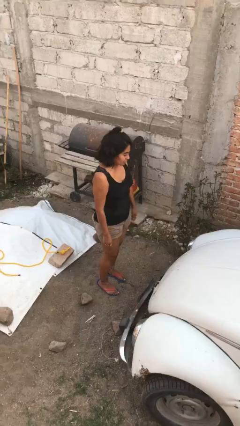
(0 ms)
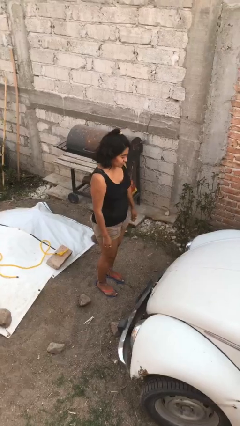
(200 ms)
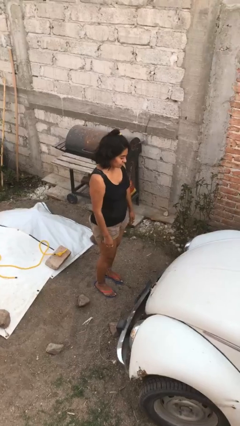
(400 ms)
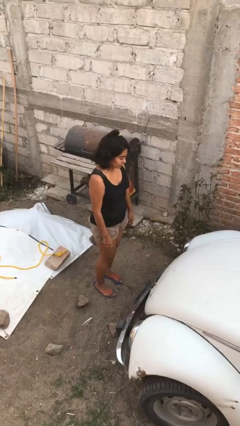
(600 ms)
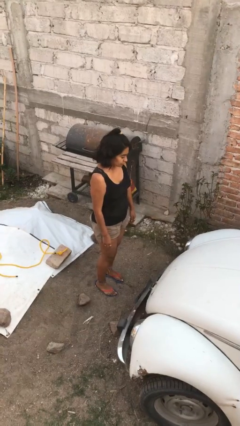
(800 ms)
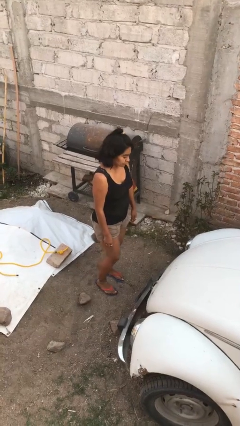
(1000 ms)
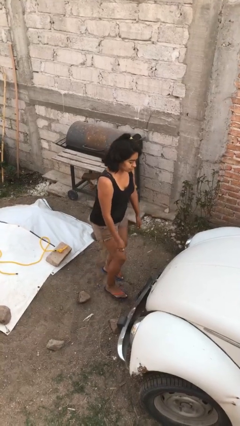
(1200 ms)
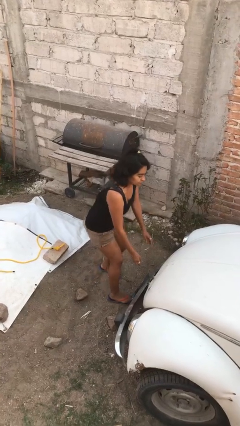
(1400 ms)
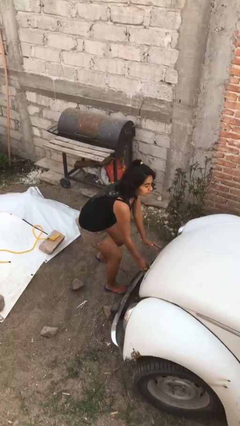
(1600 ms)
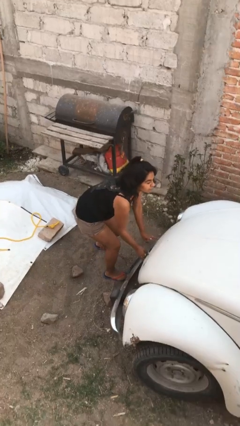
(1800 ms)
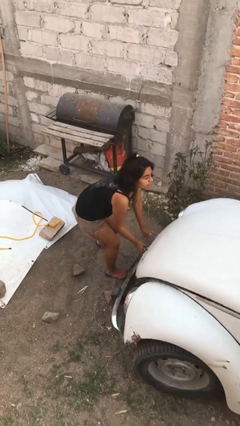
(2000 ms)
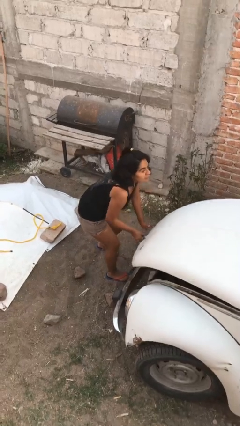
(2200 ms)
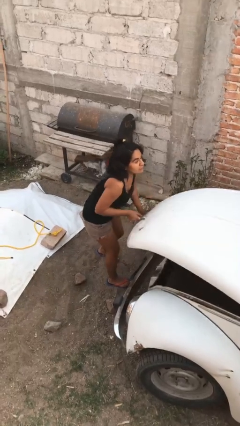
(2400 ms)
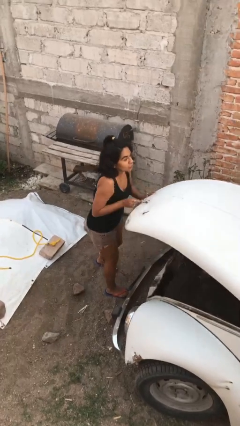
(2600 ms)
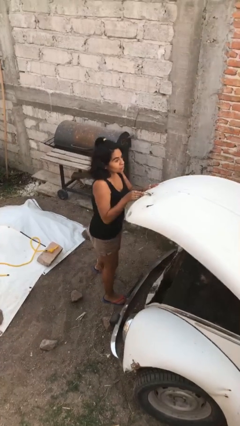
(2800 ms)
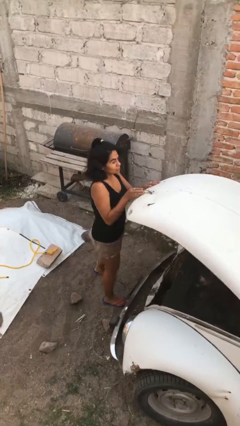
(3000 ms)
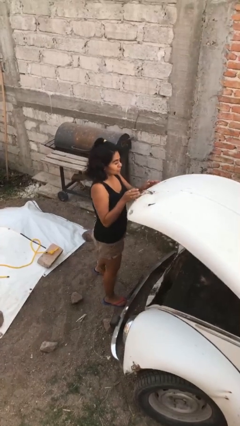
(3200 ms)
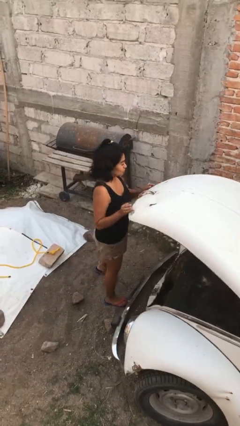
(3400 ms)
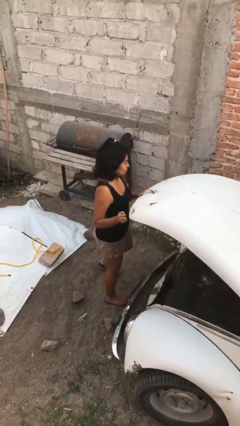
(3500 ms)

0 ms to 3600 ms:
person opens car trunk

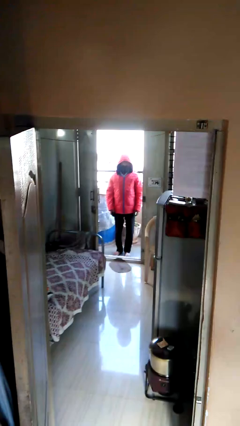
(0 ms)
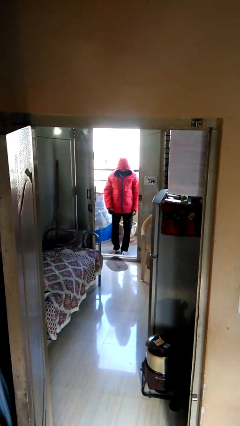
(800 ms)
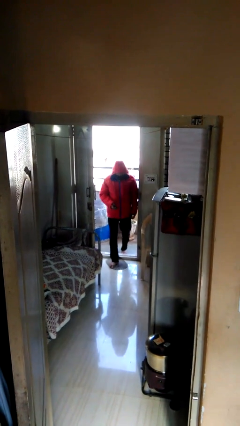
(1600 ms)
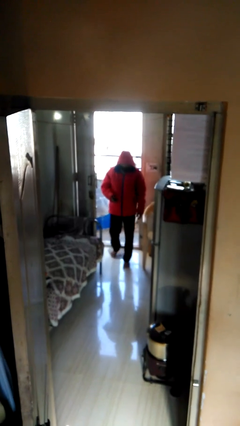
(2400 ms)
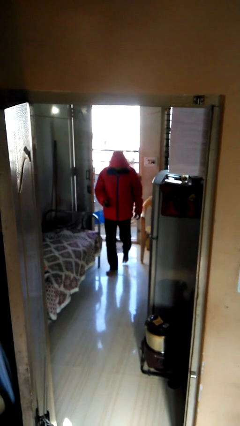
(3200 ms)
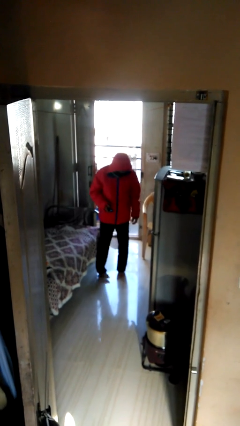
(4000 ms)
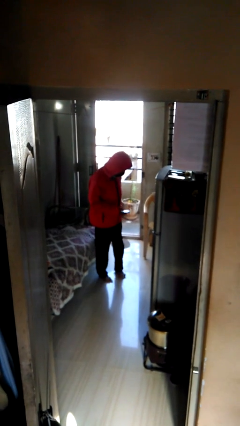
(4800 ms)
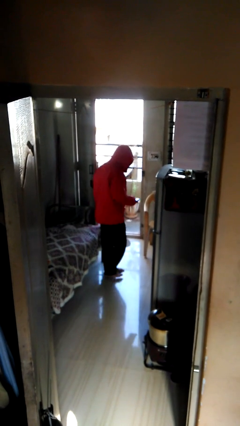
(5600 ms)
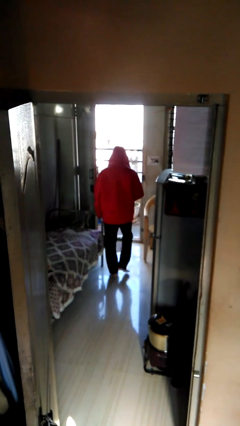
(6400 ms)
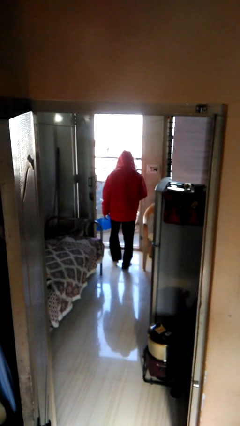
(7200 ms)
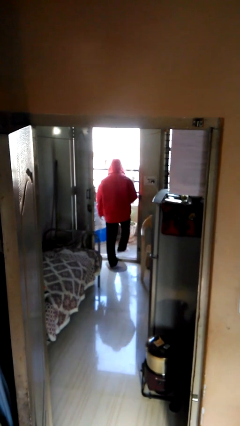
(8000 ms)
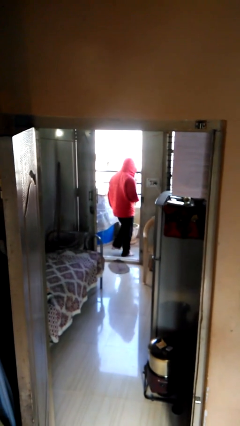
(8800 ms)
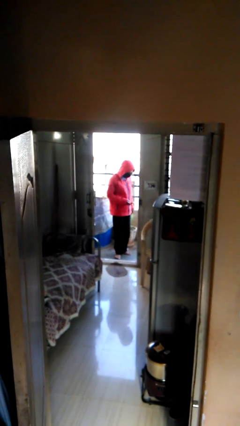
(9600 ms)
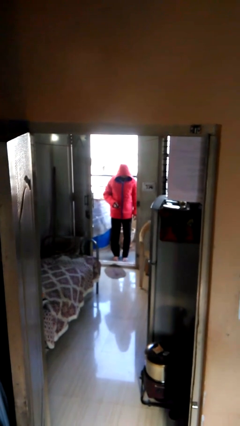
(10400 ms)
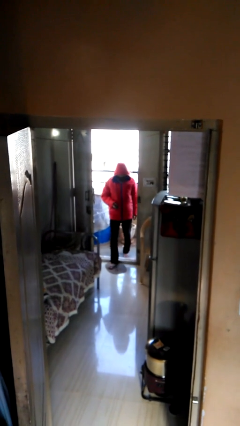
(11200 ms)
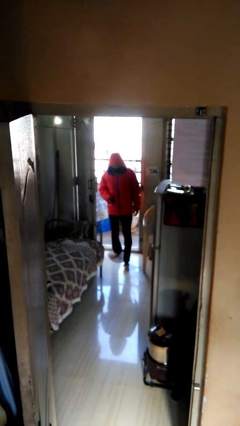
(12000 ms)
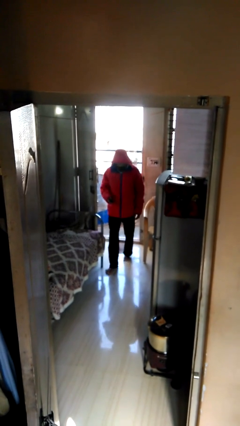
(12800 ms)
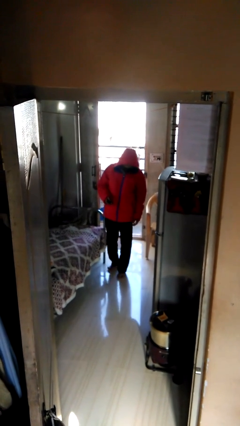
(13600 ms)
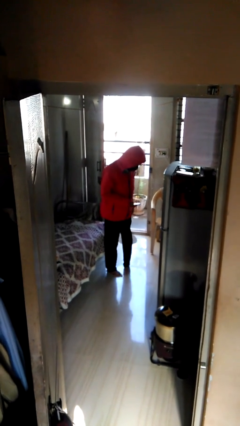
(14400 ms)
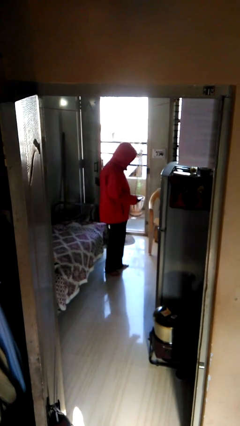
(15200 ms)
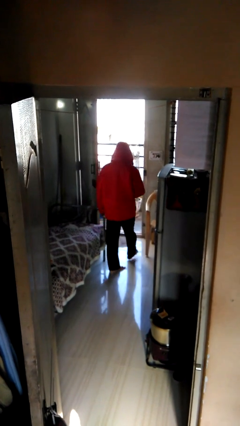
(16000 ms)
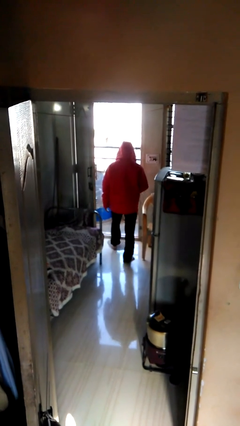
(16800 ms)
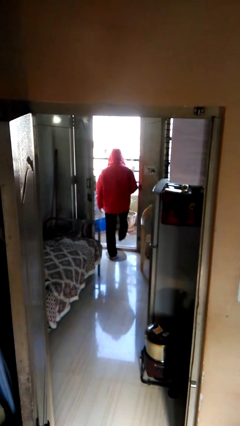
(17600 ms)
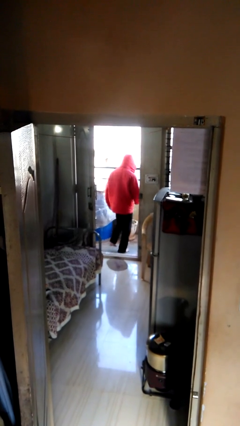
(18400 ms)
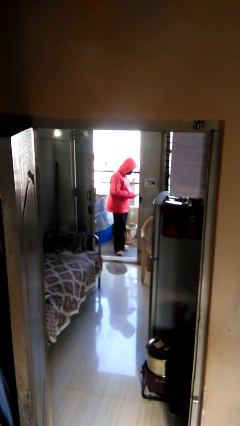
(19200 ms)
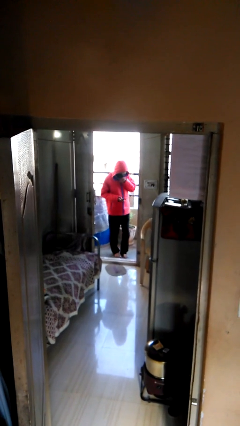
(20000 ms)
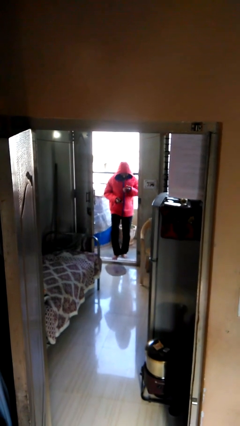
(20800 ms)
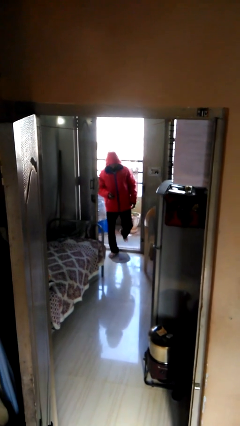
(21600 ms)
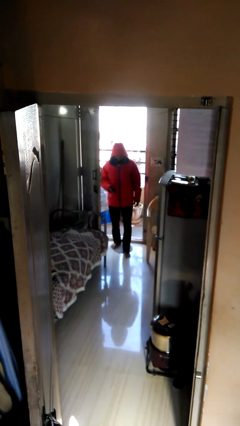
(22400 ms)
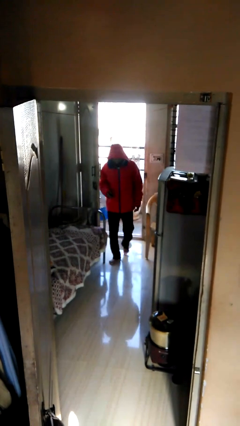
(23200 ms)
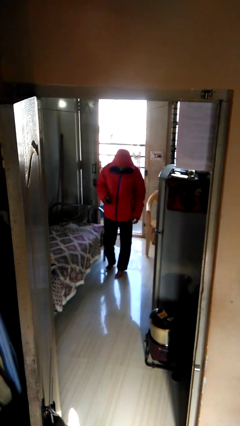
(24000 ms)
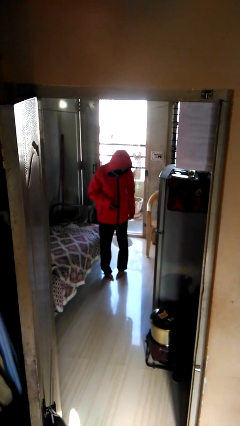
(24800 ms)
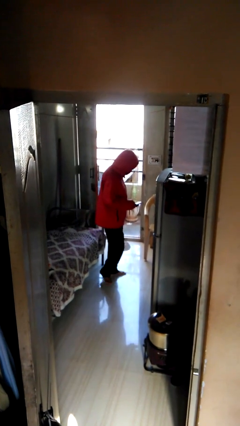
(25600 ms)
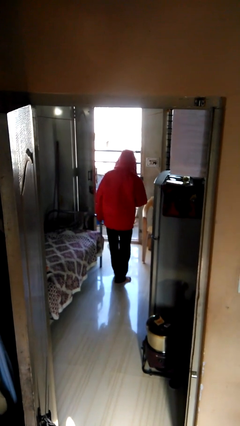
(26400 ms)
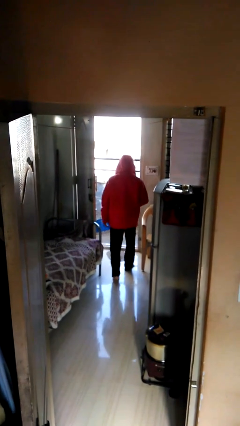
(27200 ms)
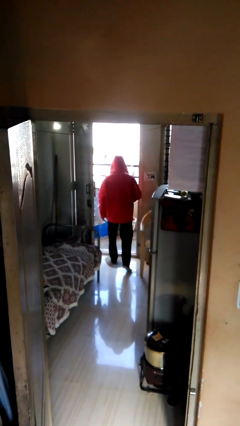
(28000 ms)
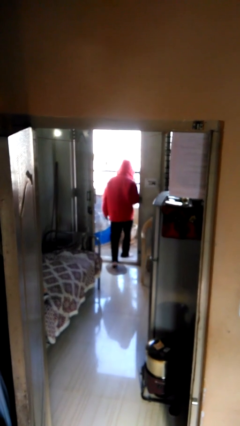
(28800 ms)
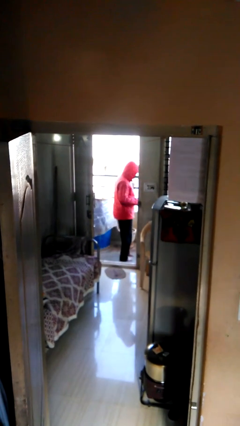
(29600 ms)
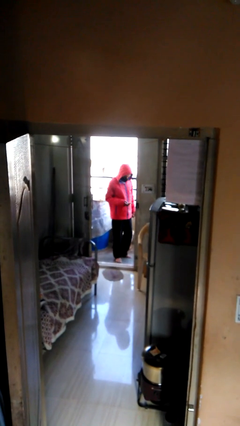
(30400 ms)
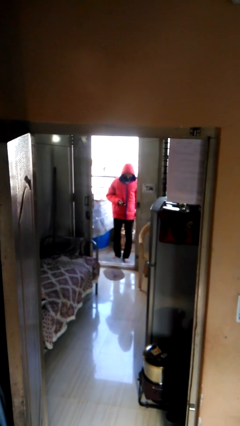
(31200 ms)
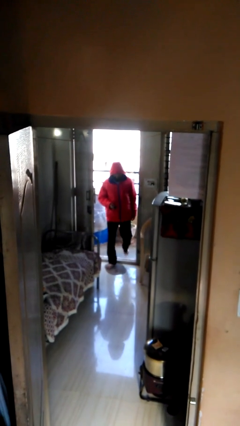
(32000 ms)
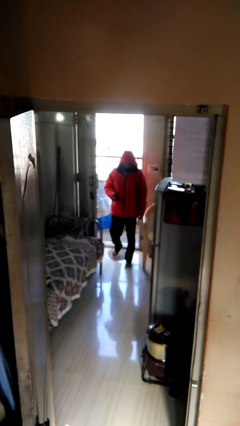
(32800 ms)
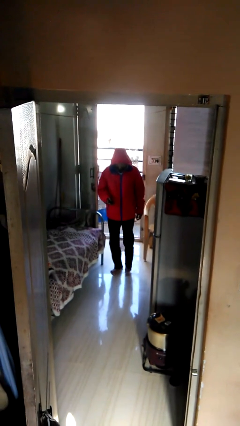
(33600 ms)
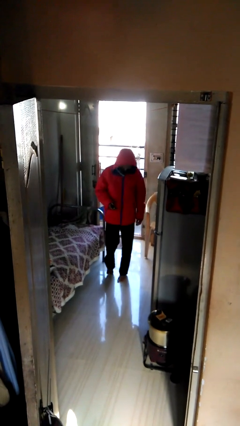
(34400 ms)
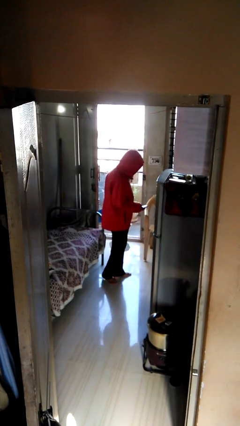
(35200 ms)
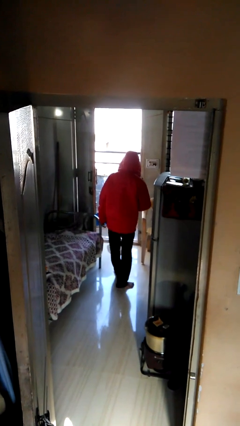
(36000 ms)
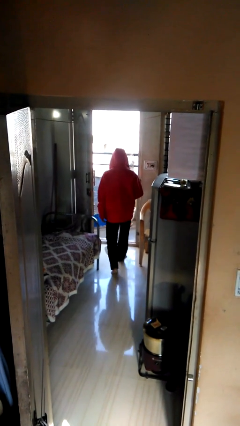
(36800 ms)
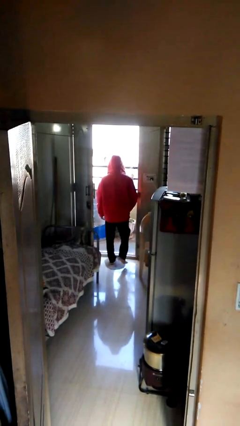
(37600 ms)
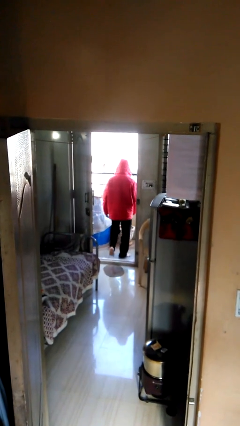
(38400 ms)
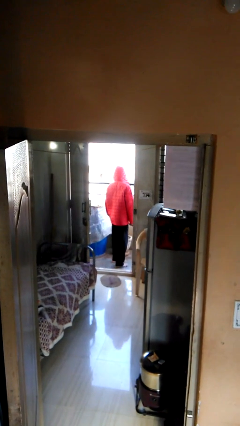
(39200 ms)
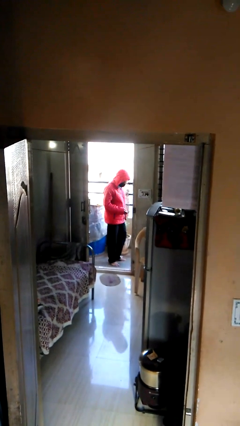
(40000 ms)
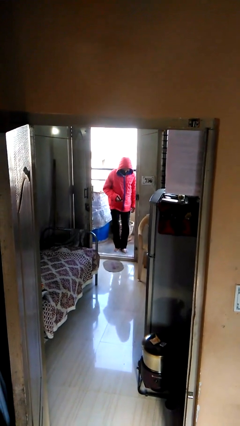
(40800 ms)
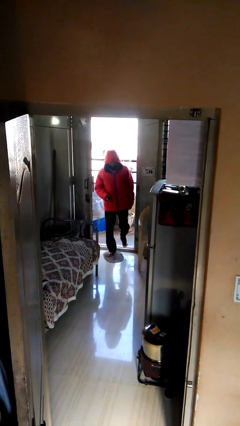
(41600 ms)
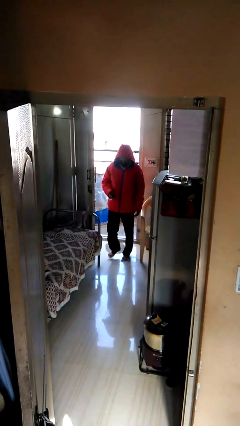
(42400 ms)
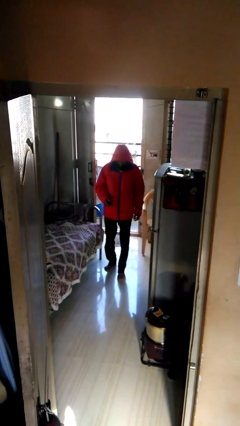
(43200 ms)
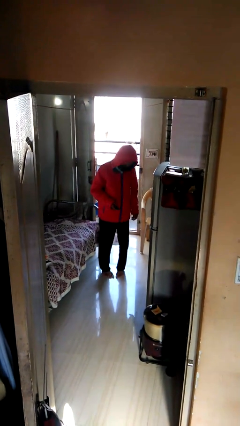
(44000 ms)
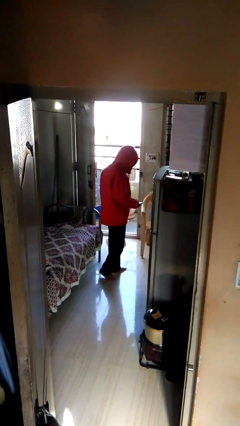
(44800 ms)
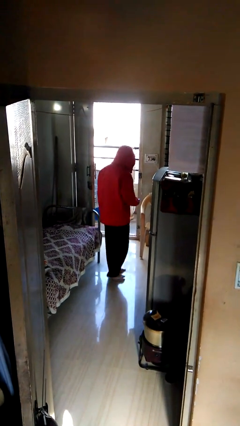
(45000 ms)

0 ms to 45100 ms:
person texts on phone

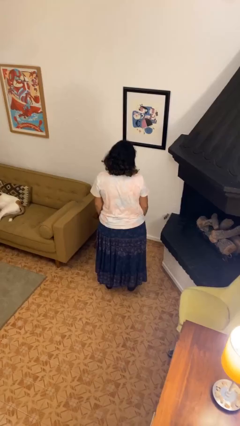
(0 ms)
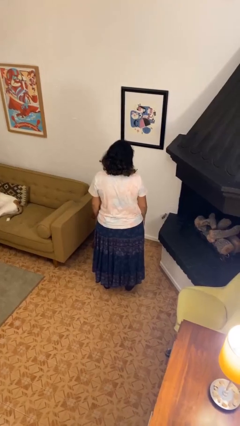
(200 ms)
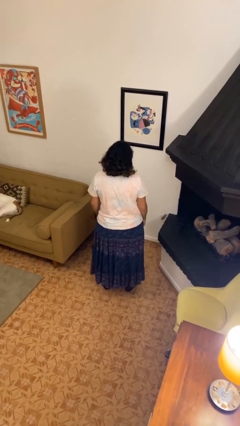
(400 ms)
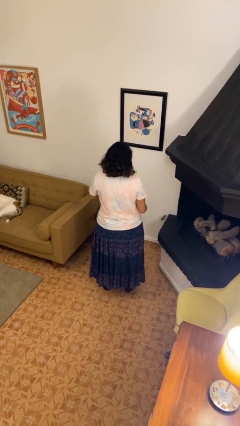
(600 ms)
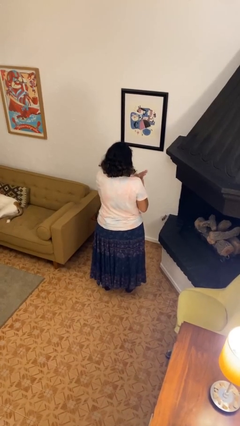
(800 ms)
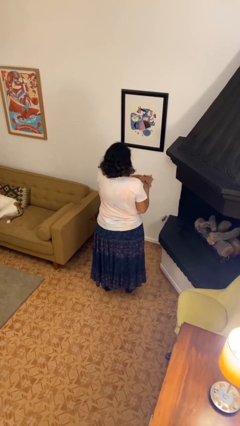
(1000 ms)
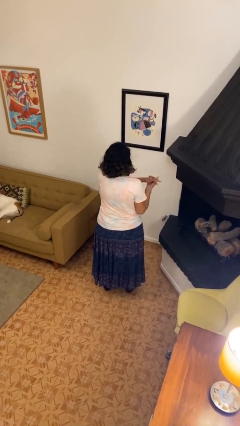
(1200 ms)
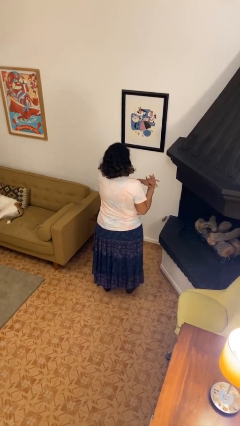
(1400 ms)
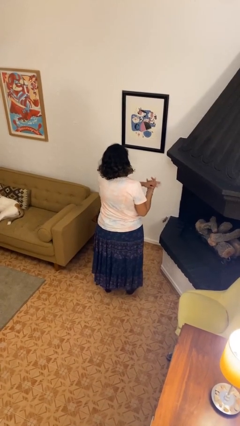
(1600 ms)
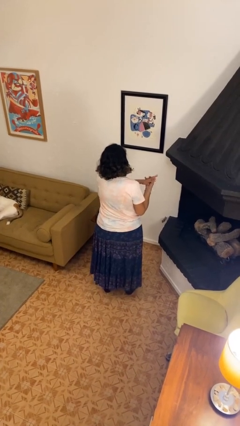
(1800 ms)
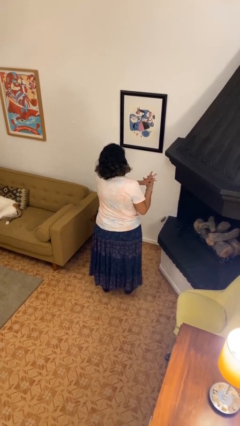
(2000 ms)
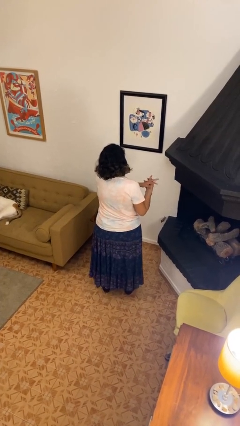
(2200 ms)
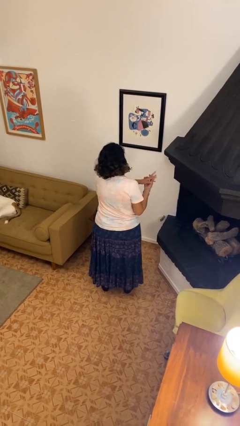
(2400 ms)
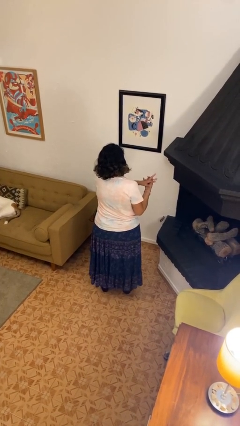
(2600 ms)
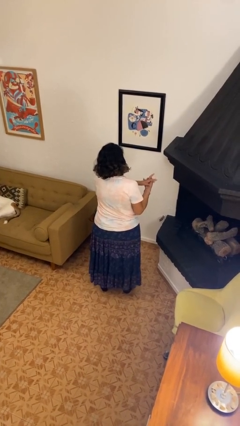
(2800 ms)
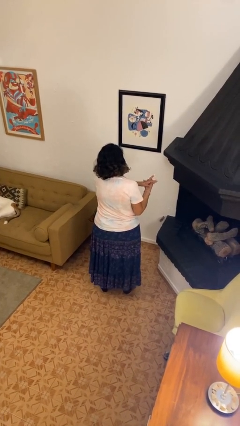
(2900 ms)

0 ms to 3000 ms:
person cracks knuckles

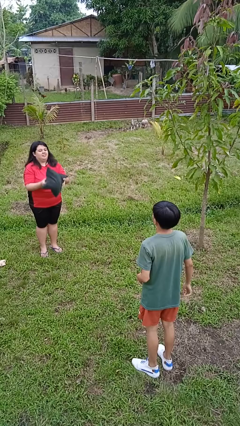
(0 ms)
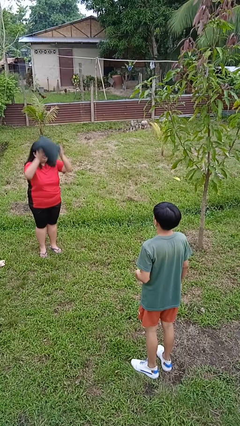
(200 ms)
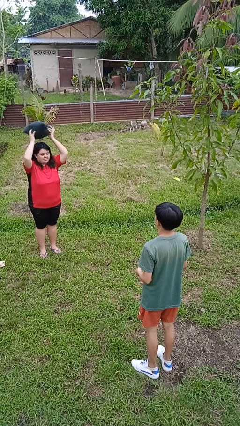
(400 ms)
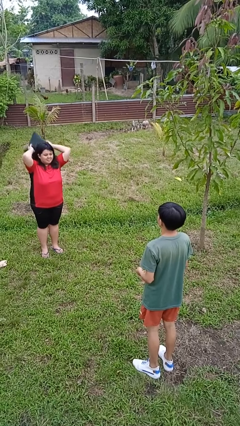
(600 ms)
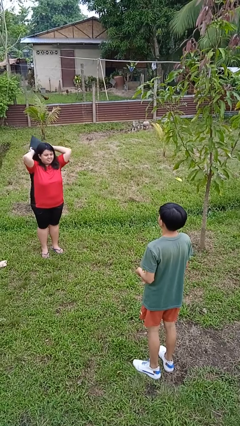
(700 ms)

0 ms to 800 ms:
person throws object to person
